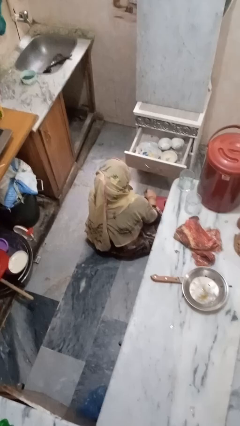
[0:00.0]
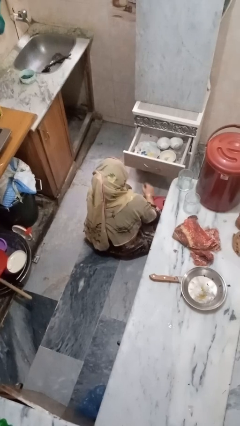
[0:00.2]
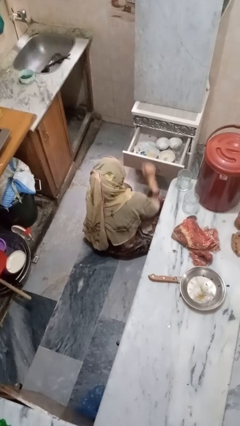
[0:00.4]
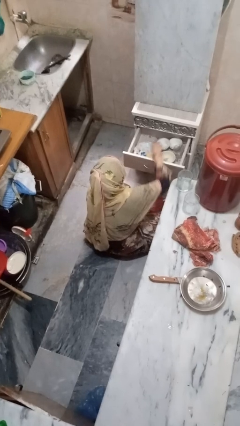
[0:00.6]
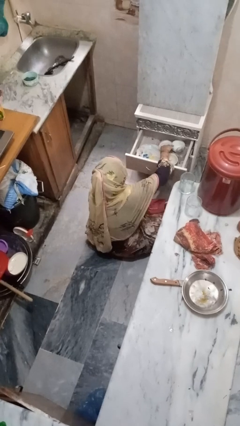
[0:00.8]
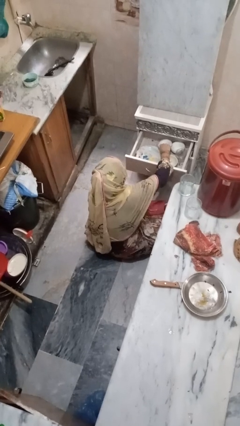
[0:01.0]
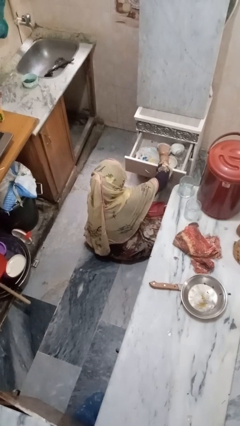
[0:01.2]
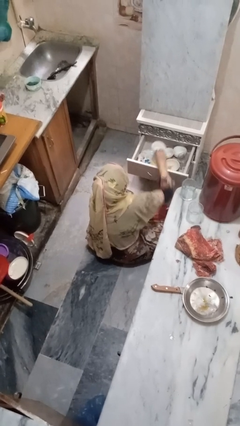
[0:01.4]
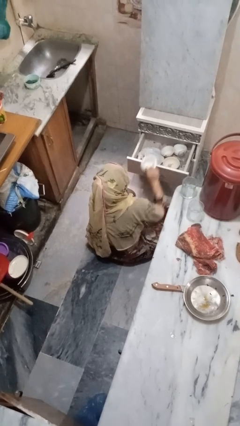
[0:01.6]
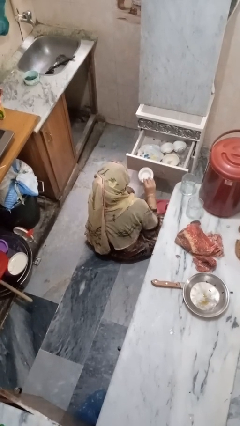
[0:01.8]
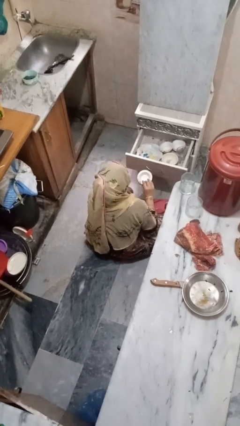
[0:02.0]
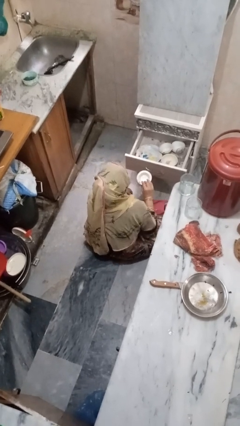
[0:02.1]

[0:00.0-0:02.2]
person takes object from kitchen drawer

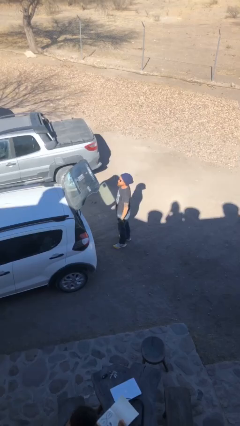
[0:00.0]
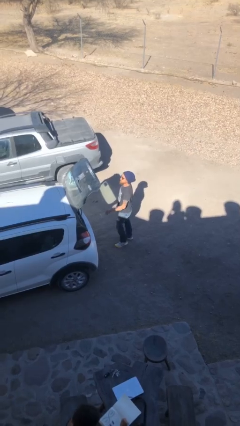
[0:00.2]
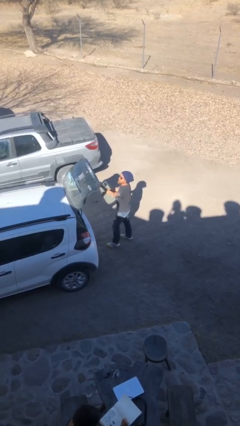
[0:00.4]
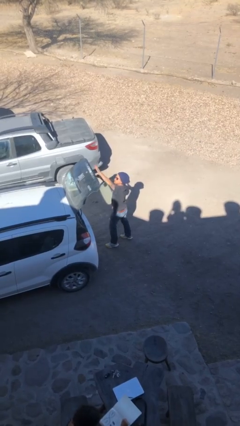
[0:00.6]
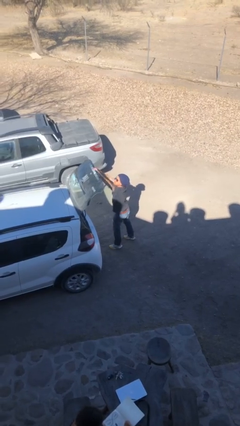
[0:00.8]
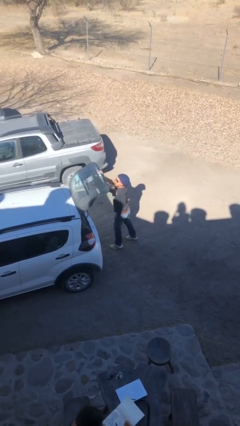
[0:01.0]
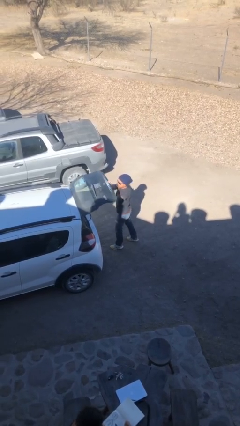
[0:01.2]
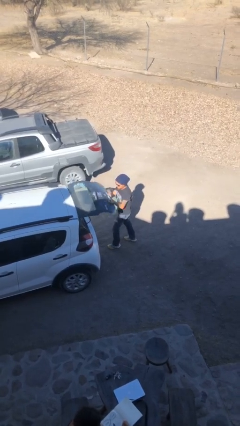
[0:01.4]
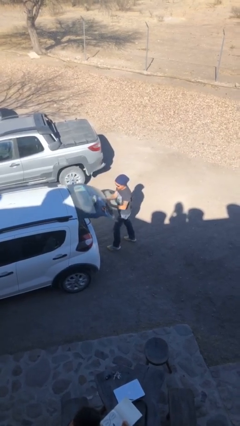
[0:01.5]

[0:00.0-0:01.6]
person closes car trunk

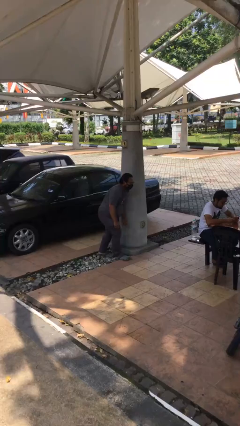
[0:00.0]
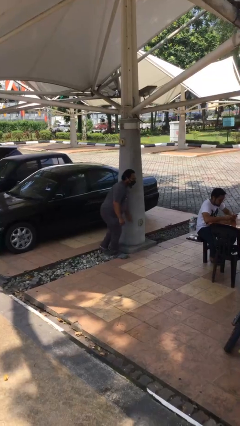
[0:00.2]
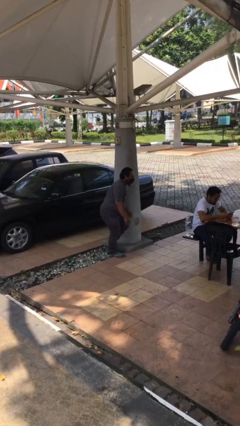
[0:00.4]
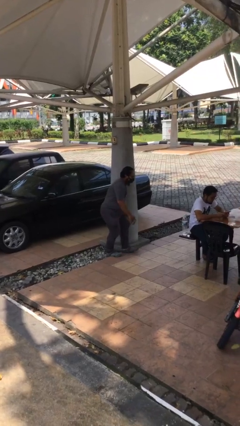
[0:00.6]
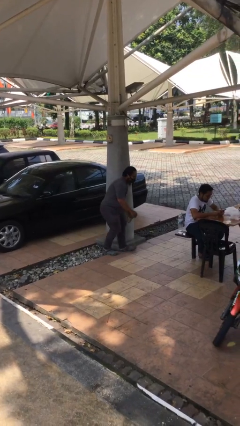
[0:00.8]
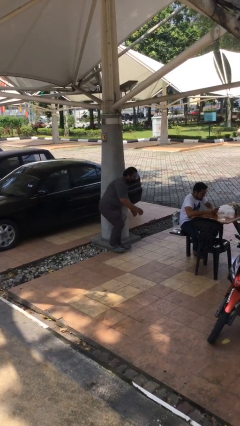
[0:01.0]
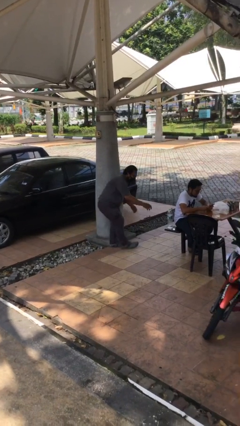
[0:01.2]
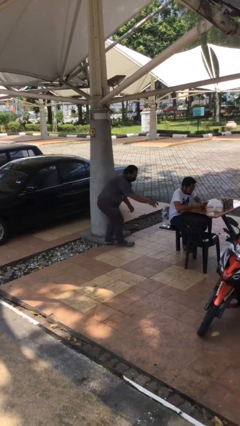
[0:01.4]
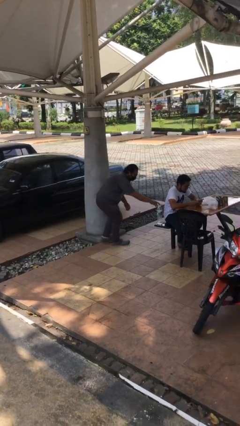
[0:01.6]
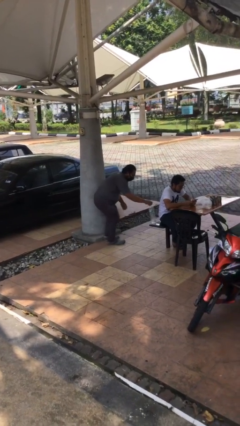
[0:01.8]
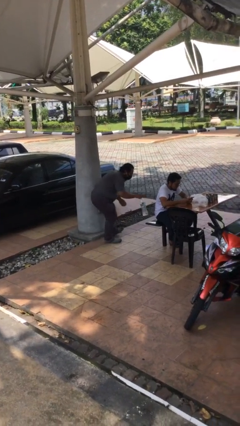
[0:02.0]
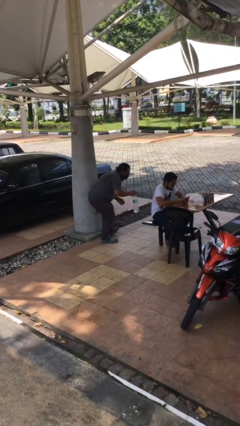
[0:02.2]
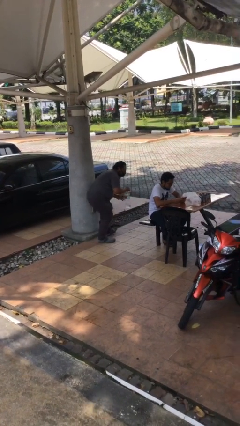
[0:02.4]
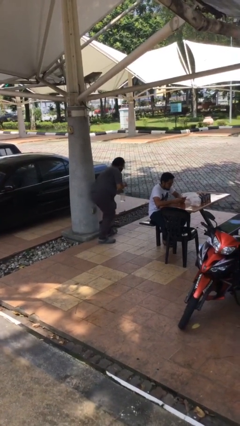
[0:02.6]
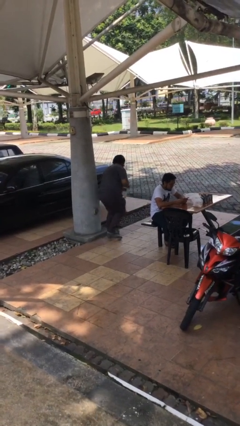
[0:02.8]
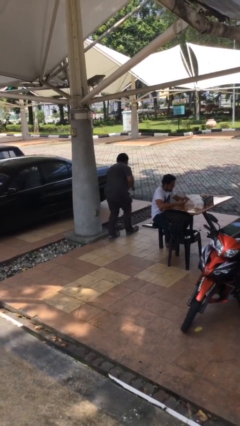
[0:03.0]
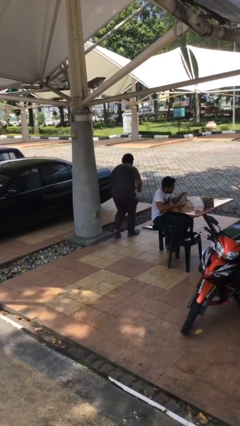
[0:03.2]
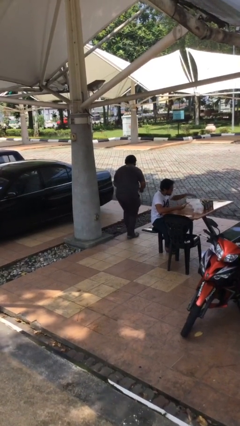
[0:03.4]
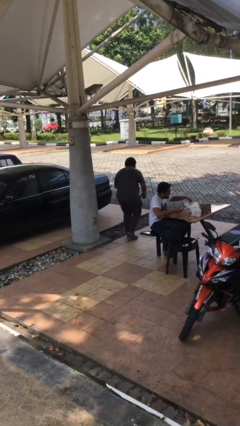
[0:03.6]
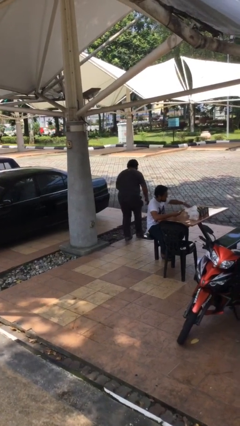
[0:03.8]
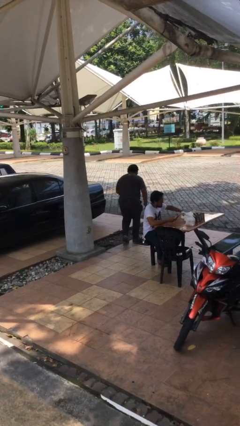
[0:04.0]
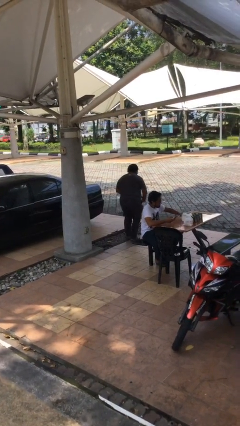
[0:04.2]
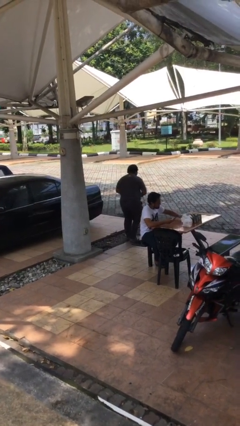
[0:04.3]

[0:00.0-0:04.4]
person steals object from person

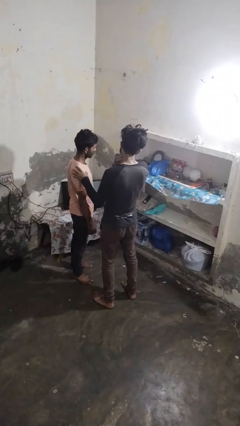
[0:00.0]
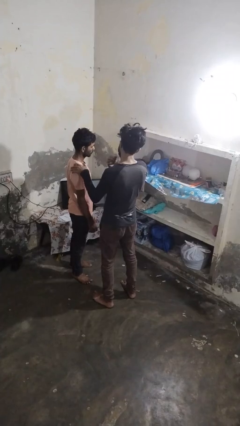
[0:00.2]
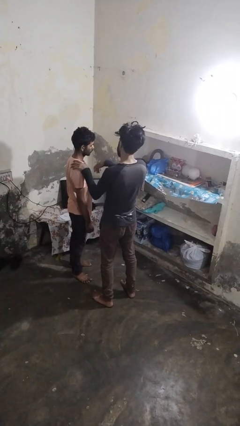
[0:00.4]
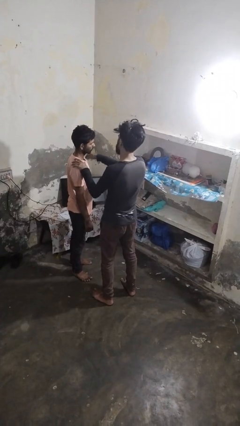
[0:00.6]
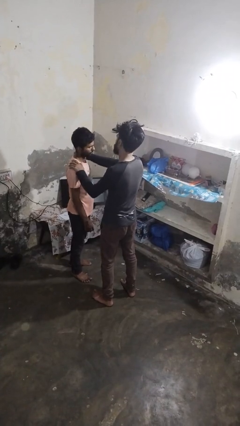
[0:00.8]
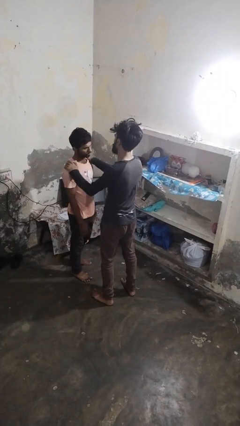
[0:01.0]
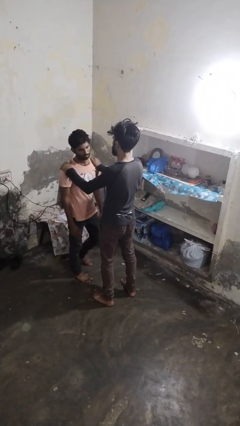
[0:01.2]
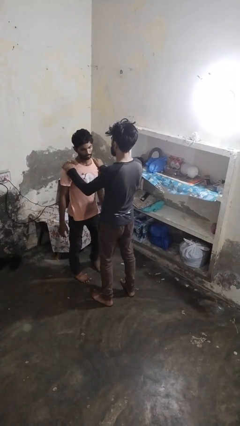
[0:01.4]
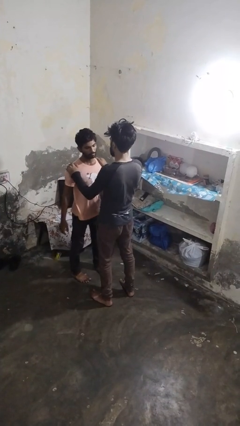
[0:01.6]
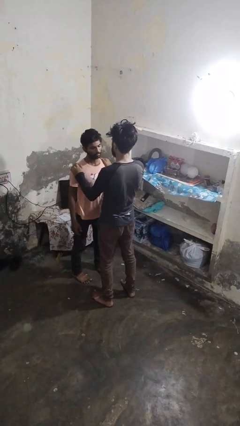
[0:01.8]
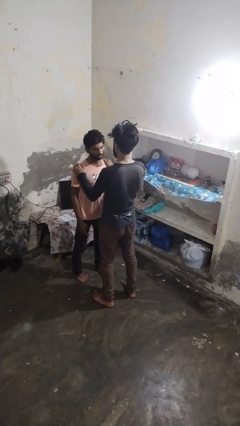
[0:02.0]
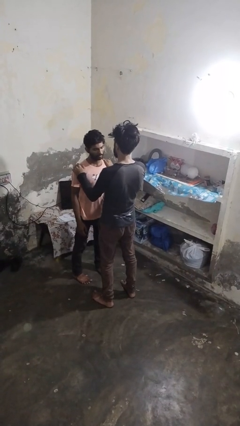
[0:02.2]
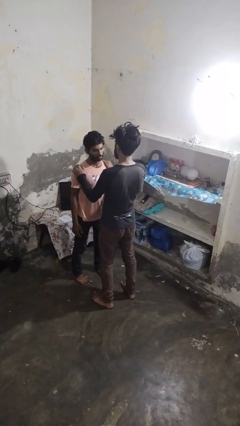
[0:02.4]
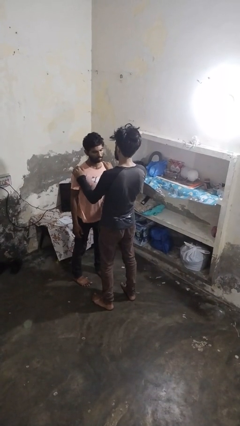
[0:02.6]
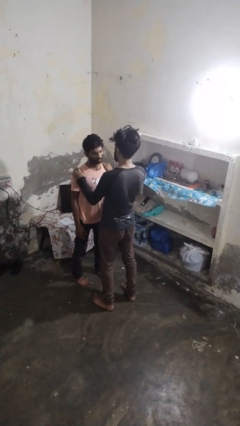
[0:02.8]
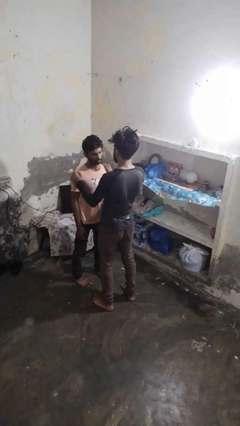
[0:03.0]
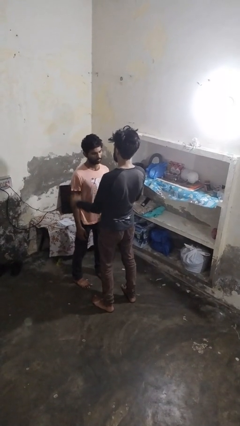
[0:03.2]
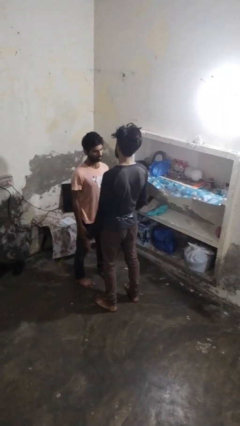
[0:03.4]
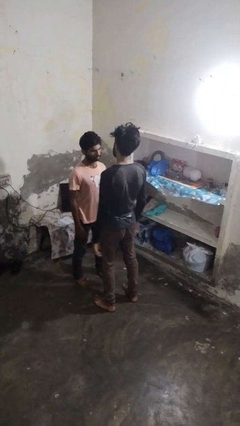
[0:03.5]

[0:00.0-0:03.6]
person spins person around

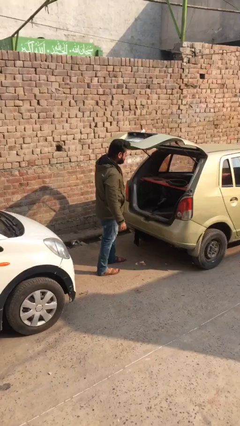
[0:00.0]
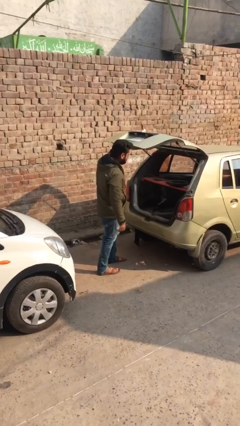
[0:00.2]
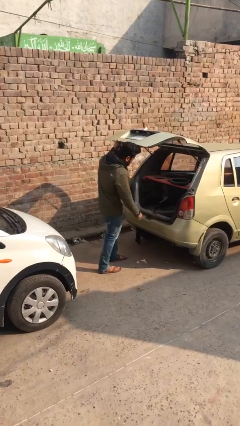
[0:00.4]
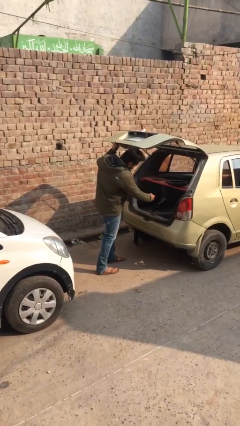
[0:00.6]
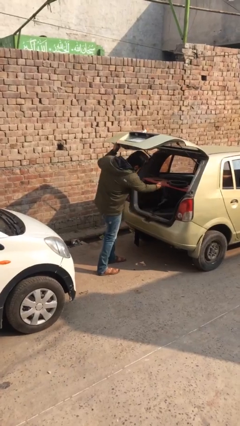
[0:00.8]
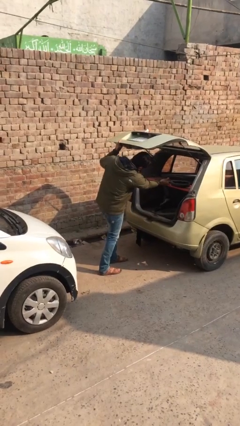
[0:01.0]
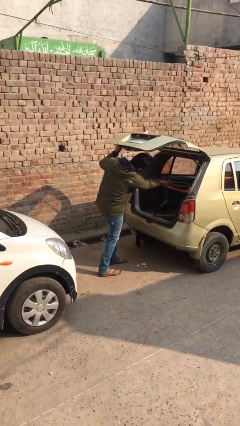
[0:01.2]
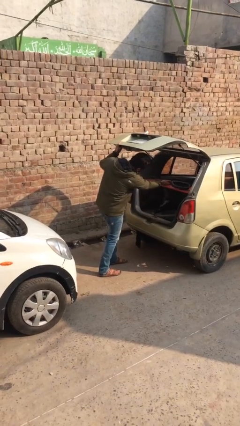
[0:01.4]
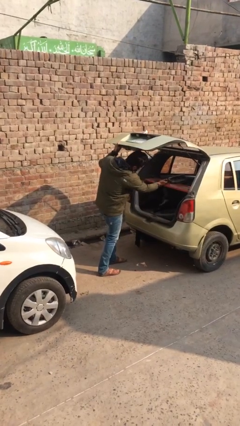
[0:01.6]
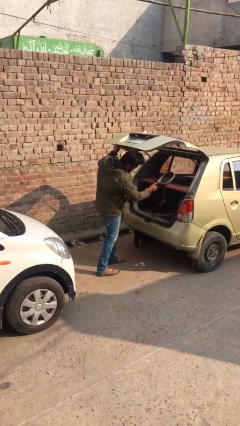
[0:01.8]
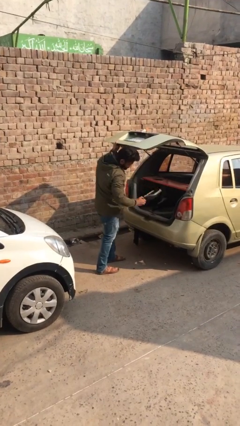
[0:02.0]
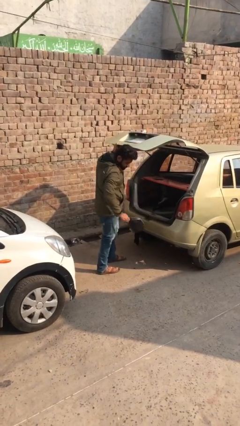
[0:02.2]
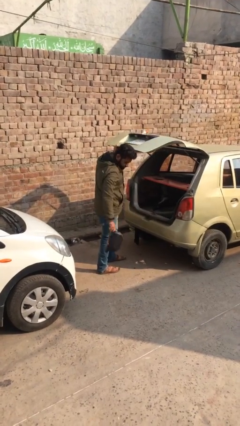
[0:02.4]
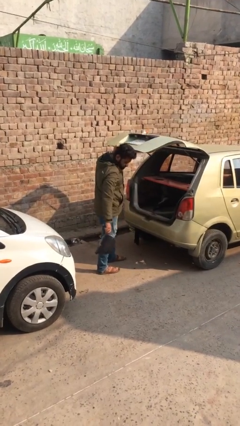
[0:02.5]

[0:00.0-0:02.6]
person unloads car

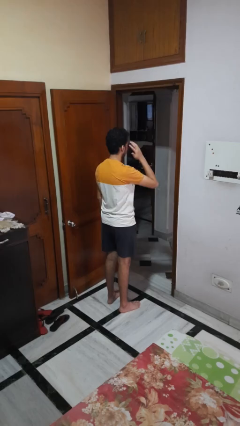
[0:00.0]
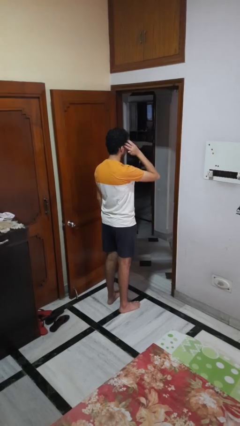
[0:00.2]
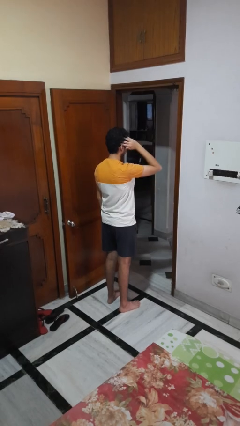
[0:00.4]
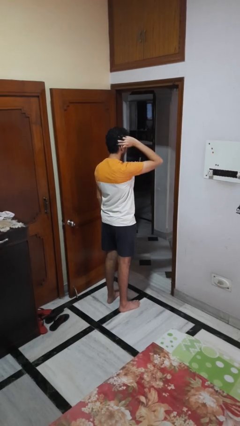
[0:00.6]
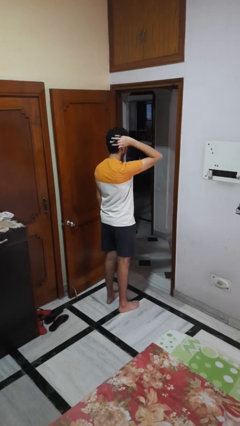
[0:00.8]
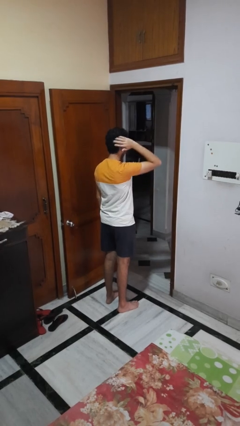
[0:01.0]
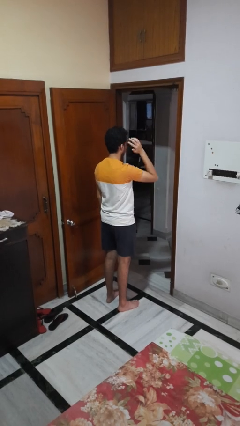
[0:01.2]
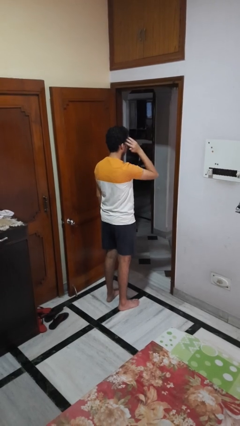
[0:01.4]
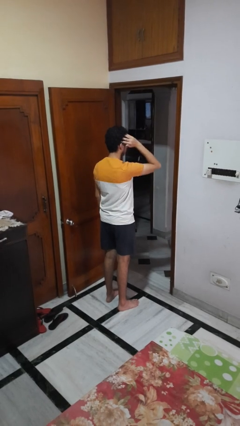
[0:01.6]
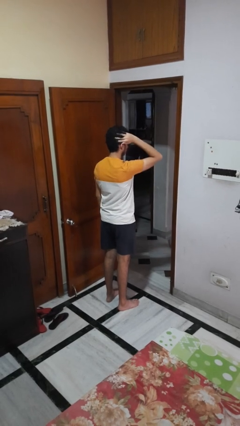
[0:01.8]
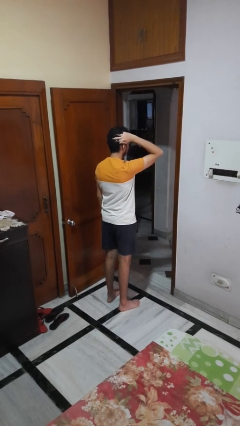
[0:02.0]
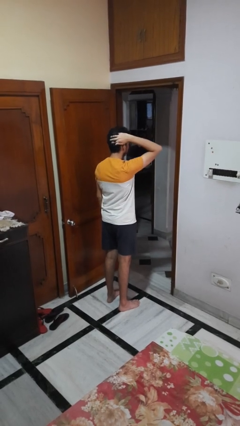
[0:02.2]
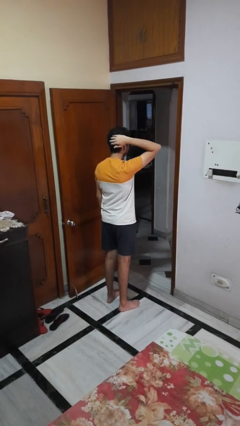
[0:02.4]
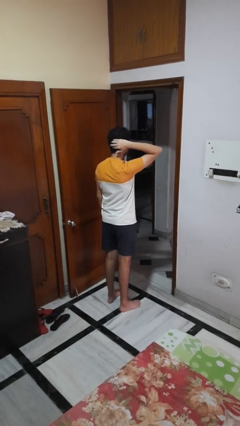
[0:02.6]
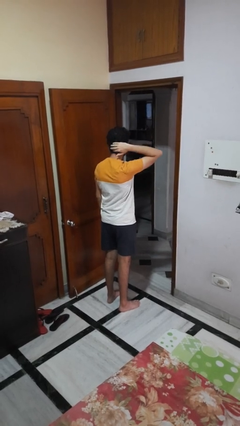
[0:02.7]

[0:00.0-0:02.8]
person strokes hair

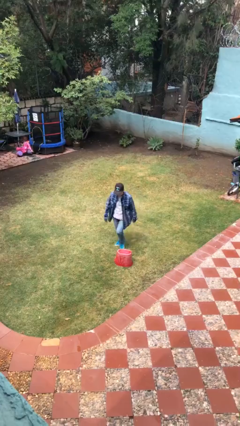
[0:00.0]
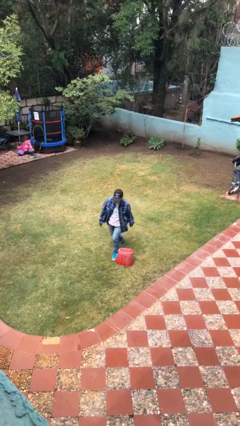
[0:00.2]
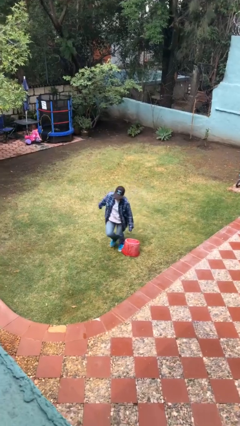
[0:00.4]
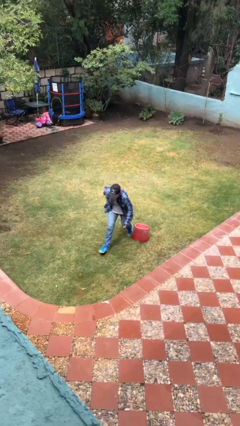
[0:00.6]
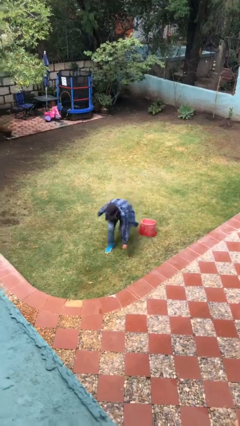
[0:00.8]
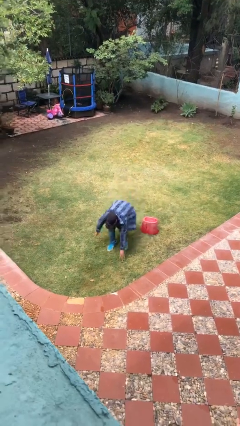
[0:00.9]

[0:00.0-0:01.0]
person trips on object on floor
